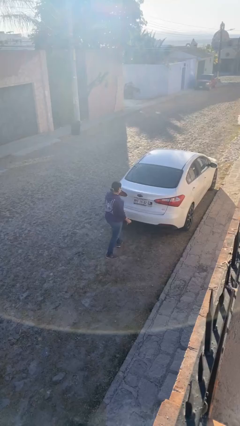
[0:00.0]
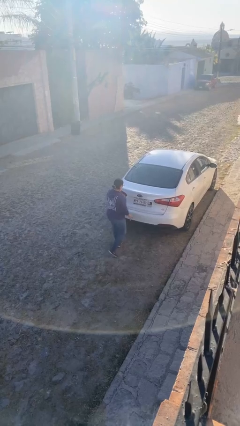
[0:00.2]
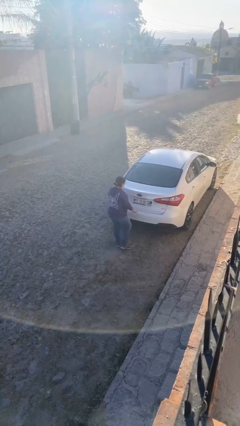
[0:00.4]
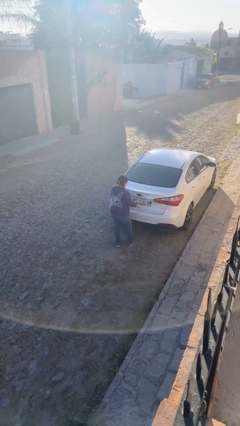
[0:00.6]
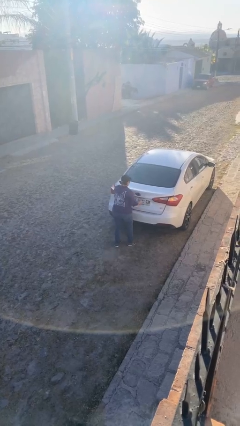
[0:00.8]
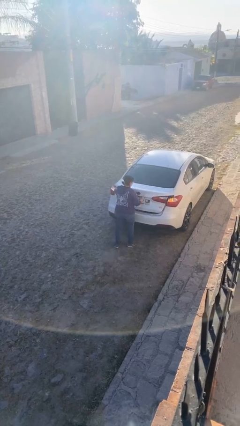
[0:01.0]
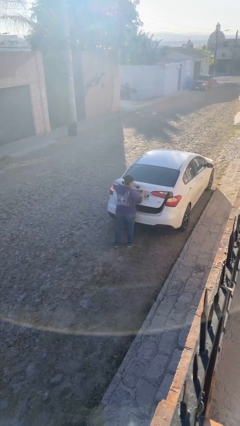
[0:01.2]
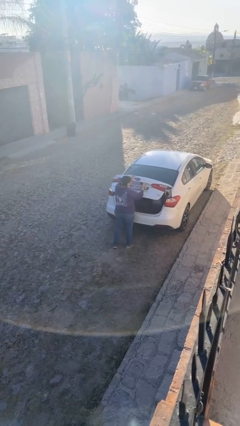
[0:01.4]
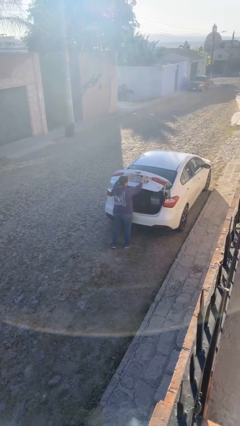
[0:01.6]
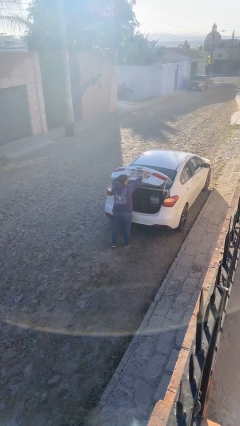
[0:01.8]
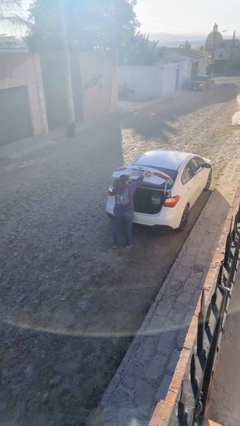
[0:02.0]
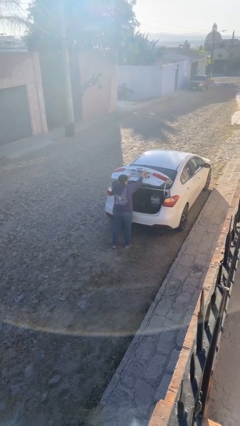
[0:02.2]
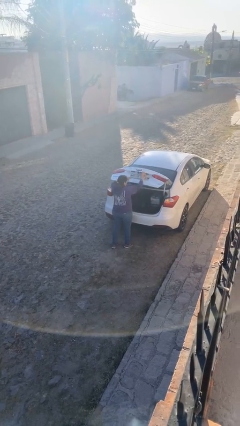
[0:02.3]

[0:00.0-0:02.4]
person opens car trunk

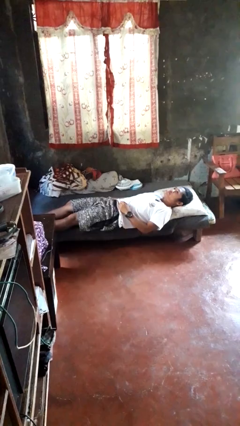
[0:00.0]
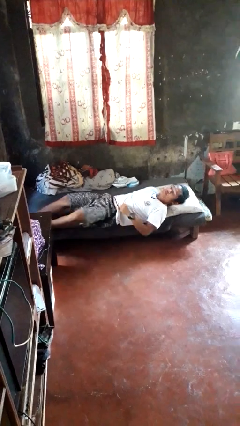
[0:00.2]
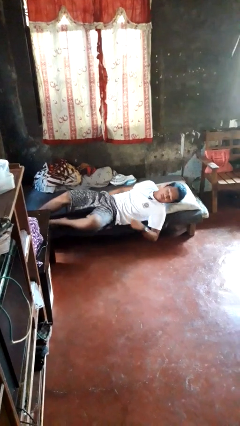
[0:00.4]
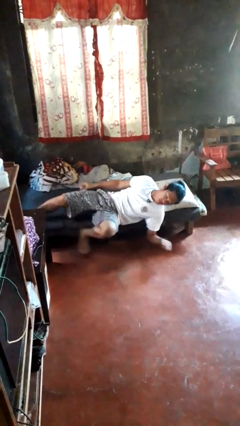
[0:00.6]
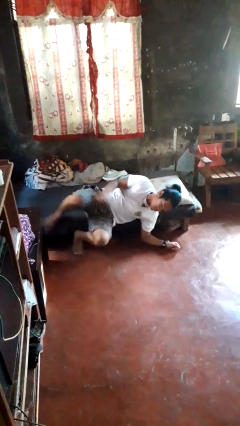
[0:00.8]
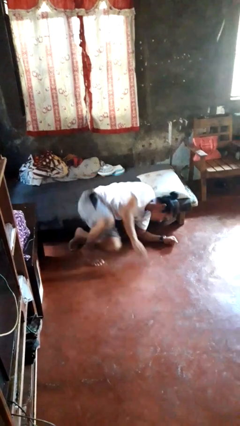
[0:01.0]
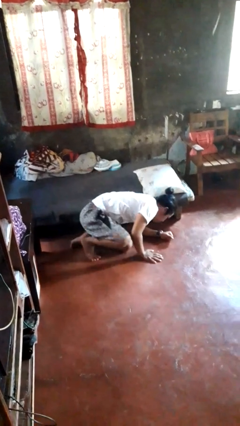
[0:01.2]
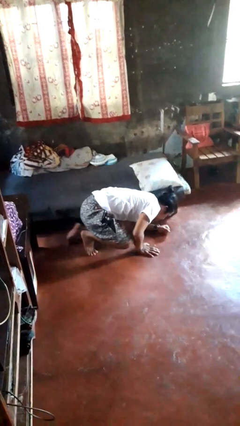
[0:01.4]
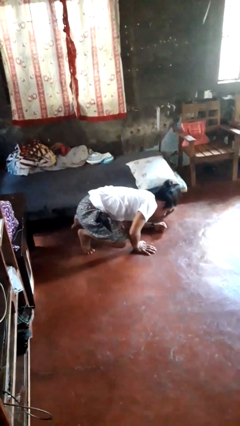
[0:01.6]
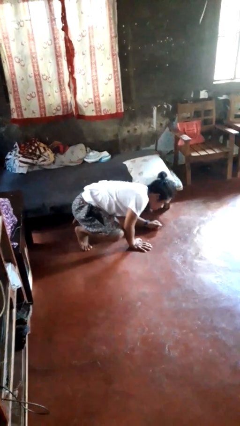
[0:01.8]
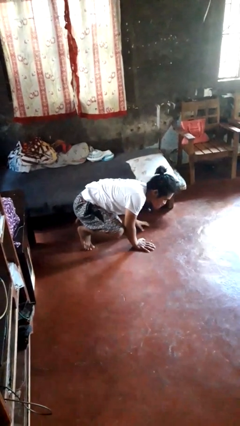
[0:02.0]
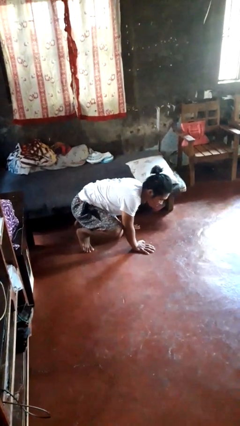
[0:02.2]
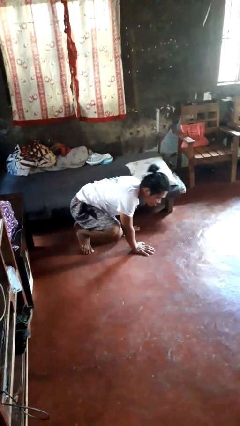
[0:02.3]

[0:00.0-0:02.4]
person falls from bed

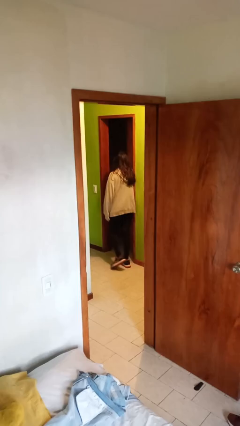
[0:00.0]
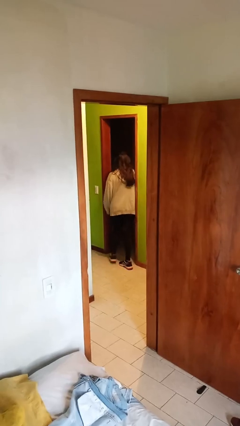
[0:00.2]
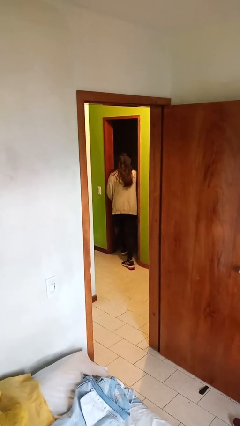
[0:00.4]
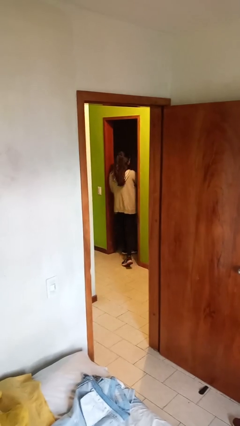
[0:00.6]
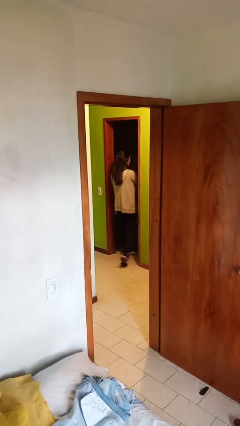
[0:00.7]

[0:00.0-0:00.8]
person opens facility door

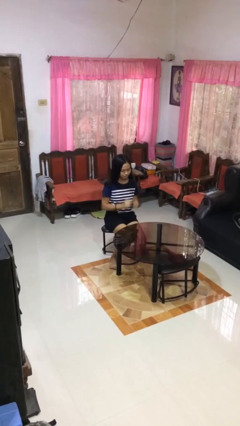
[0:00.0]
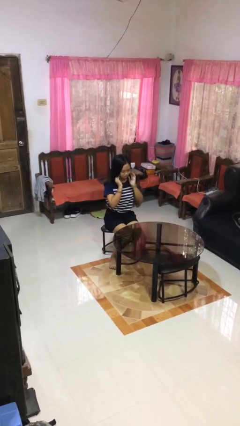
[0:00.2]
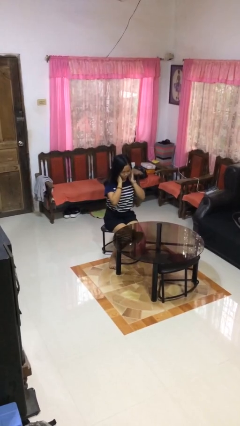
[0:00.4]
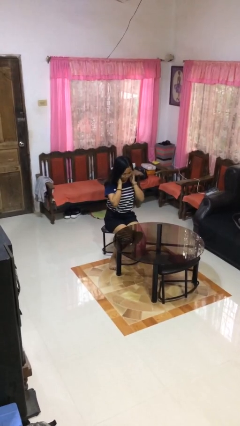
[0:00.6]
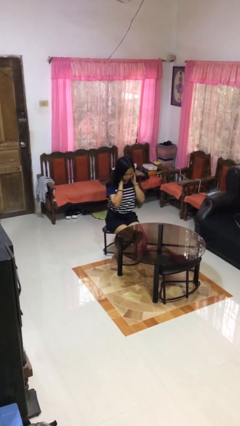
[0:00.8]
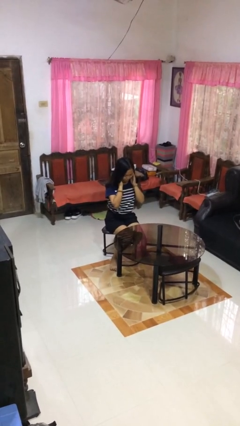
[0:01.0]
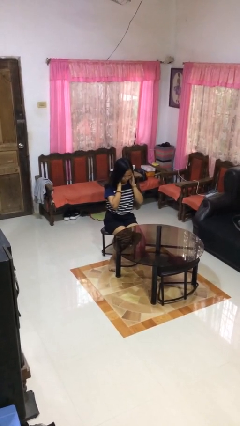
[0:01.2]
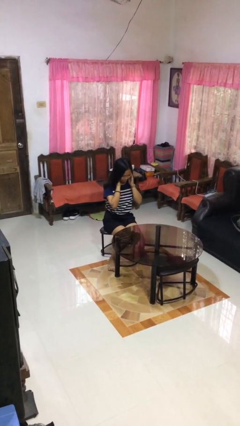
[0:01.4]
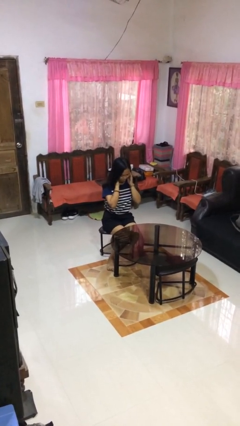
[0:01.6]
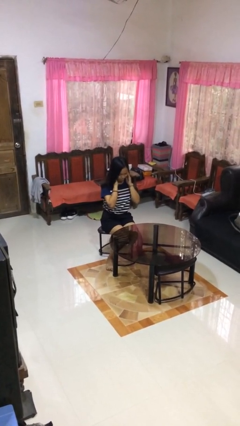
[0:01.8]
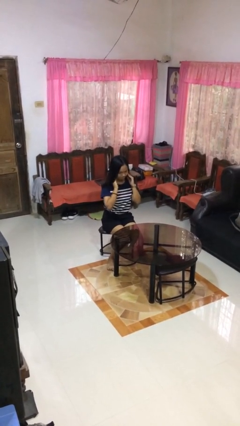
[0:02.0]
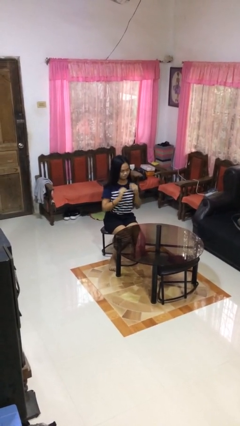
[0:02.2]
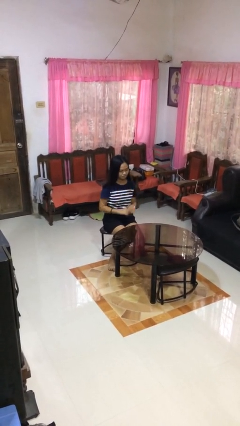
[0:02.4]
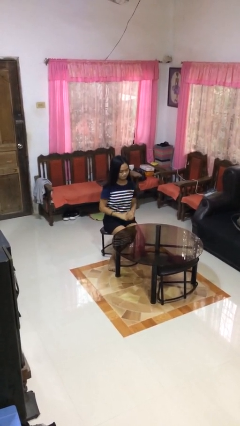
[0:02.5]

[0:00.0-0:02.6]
person puts fingers in ear

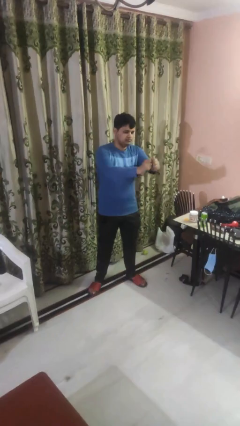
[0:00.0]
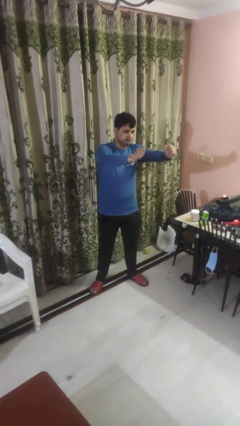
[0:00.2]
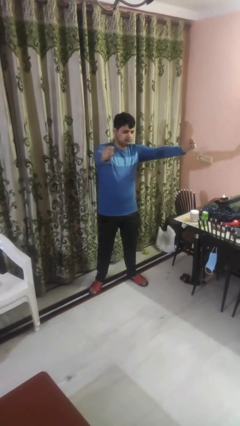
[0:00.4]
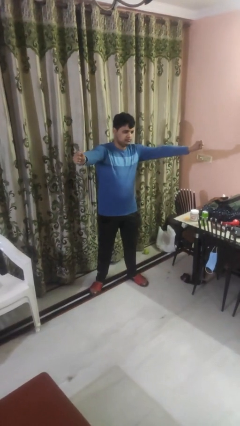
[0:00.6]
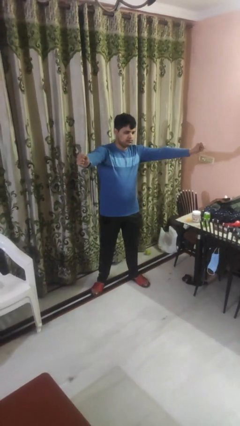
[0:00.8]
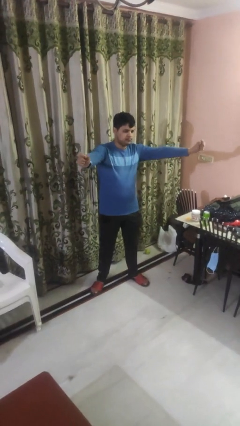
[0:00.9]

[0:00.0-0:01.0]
person gestures zoom in

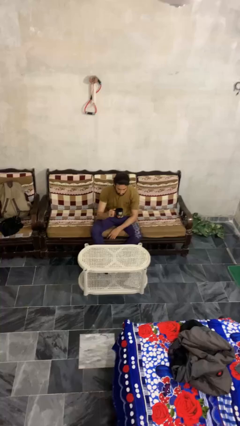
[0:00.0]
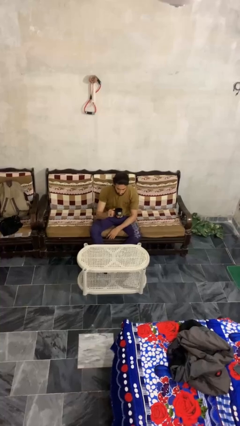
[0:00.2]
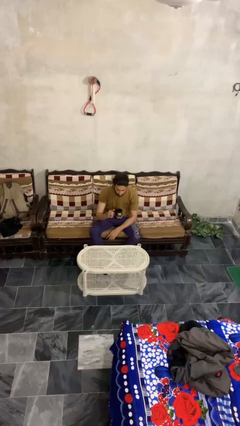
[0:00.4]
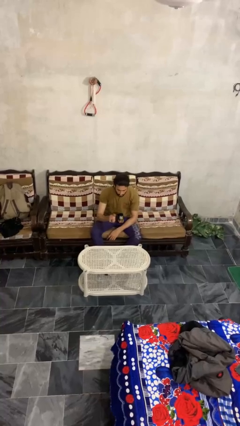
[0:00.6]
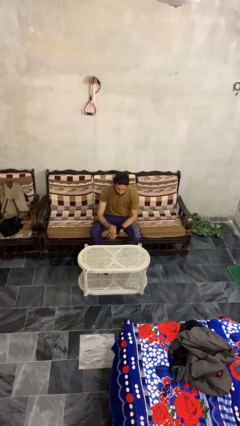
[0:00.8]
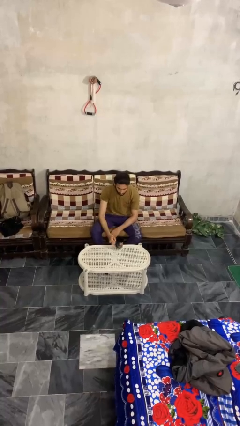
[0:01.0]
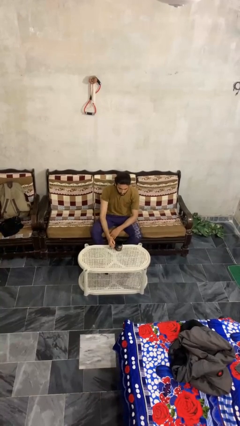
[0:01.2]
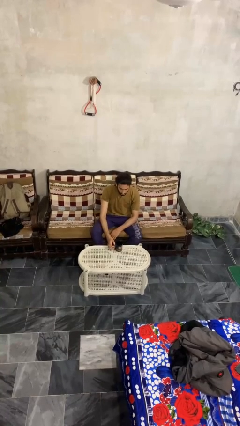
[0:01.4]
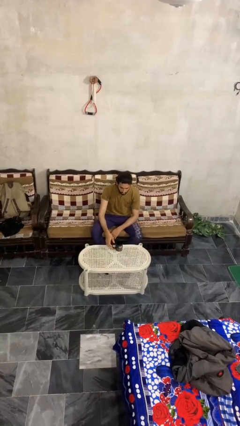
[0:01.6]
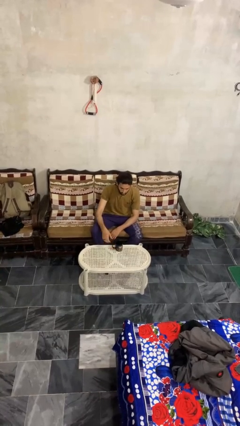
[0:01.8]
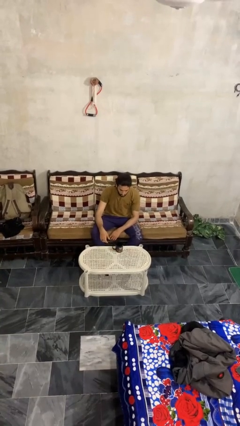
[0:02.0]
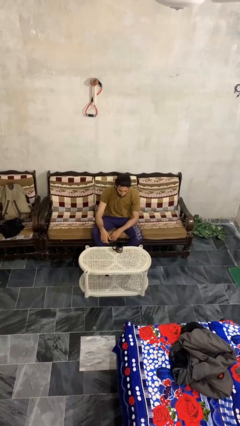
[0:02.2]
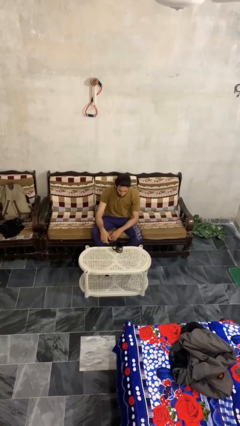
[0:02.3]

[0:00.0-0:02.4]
person puts down object on table

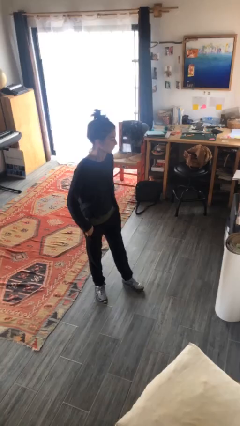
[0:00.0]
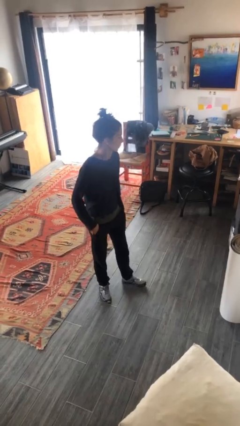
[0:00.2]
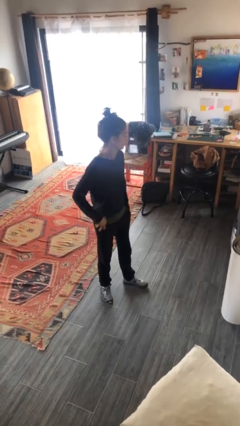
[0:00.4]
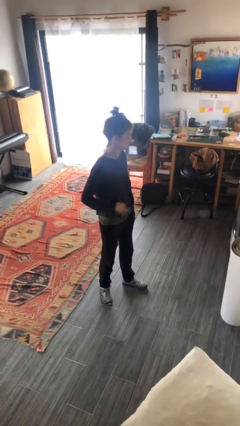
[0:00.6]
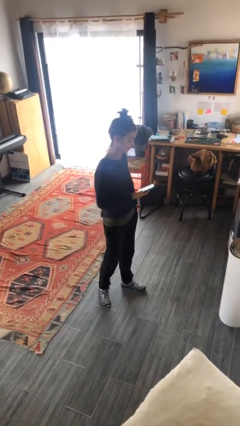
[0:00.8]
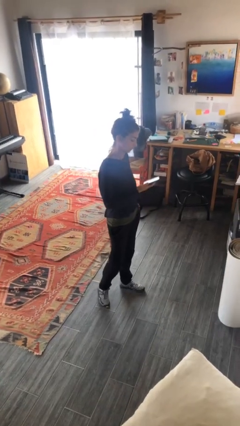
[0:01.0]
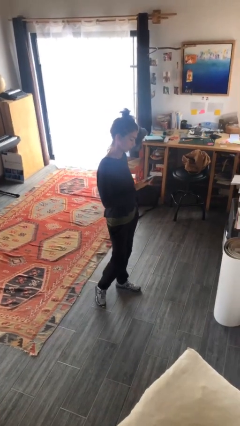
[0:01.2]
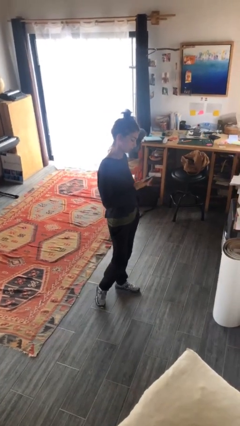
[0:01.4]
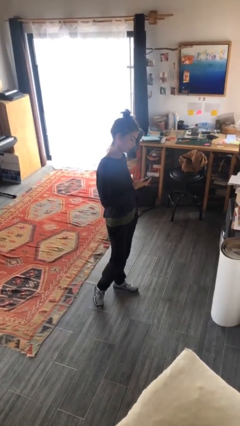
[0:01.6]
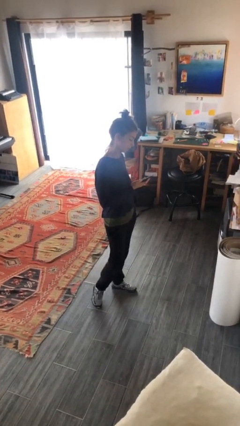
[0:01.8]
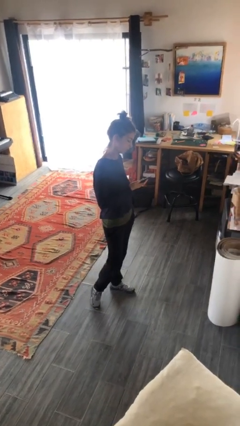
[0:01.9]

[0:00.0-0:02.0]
person takes phone from pocket

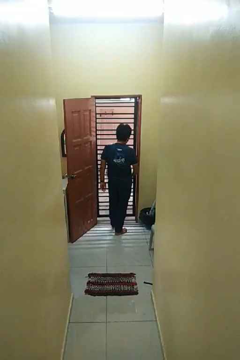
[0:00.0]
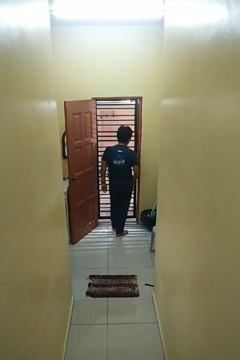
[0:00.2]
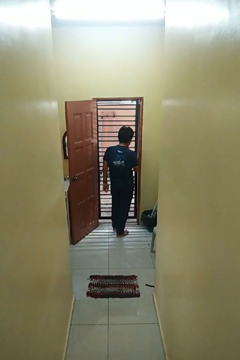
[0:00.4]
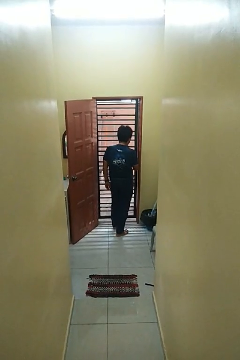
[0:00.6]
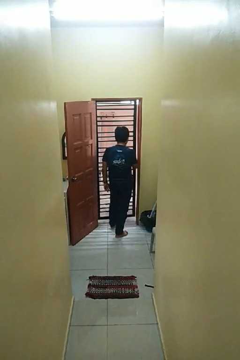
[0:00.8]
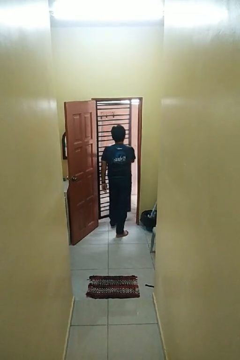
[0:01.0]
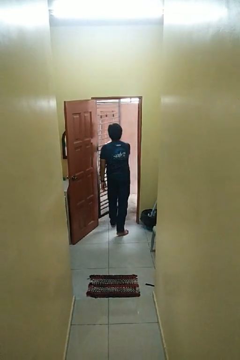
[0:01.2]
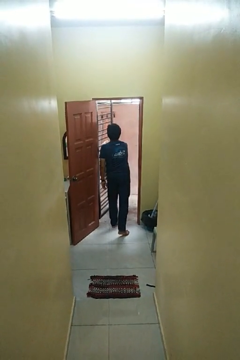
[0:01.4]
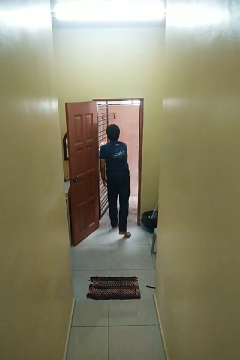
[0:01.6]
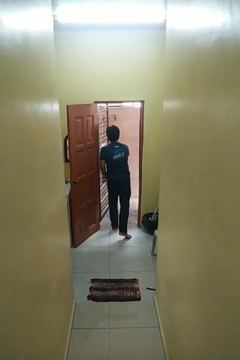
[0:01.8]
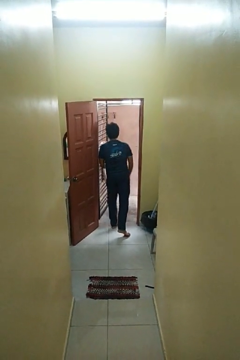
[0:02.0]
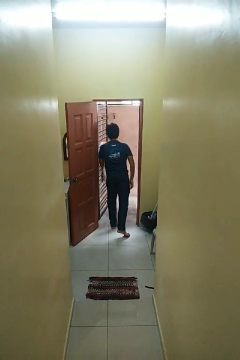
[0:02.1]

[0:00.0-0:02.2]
person opens gate

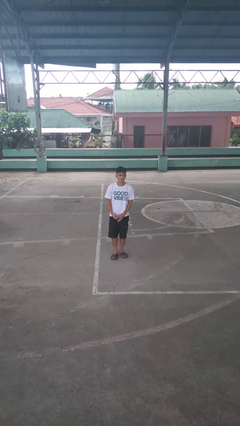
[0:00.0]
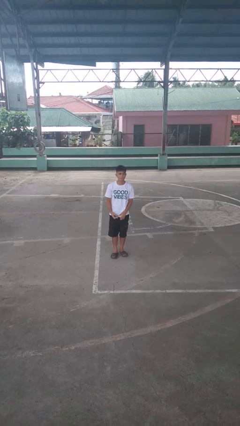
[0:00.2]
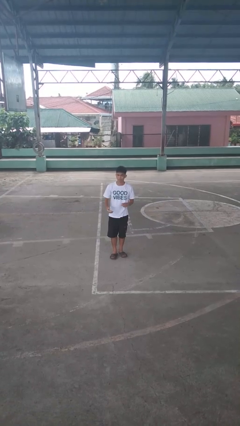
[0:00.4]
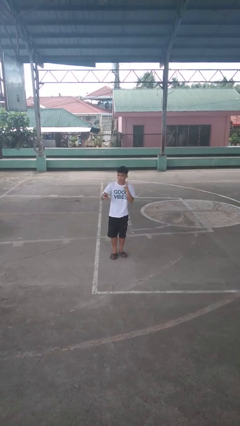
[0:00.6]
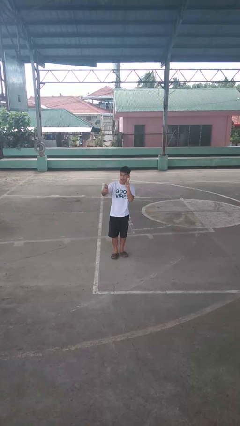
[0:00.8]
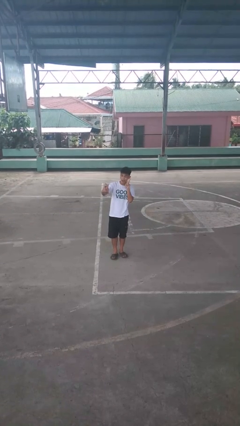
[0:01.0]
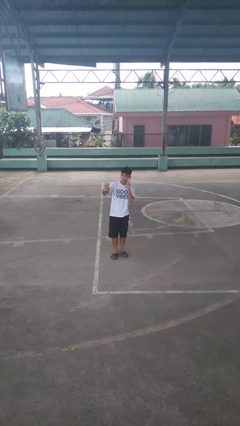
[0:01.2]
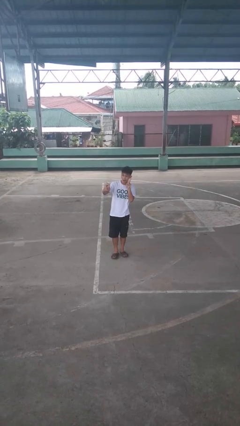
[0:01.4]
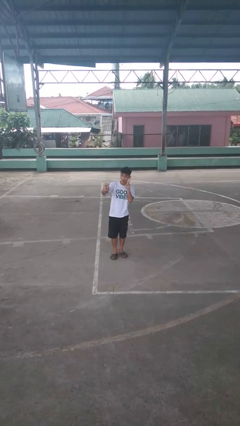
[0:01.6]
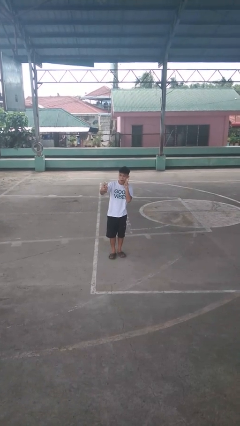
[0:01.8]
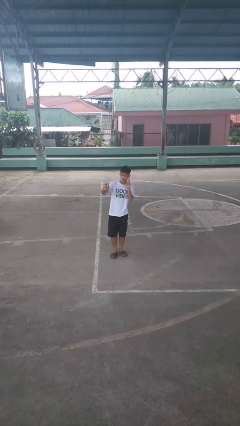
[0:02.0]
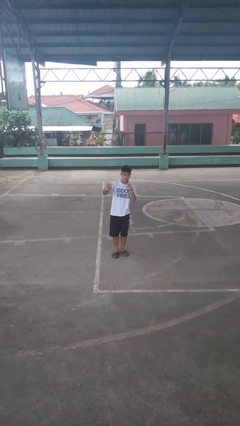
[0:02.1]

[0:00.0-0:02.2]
person takes selfie
